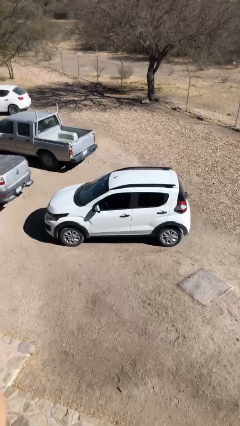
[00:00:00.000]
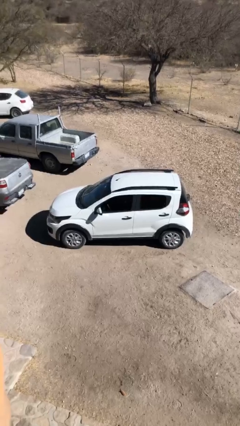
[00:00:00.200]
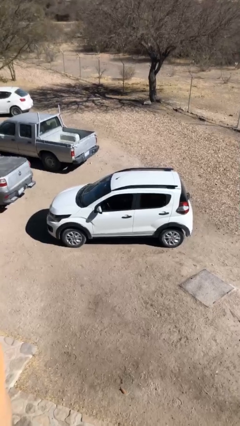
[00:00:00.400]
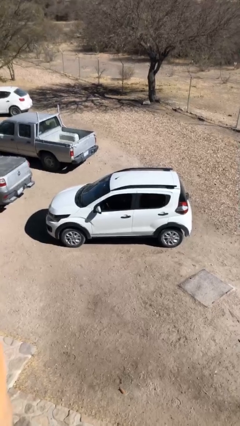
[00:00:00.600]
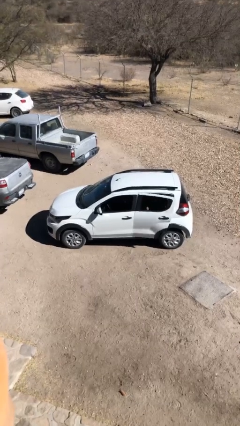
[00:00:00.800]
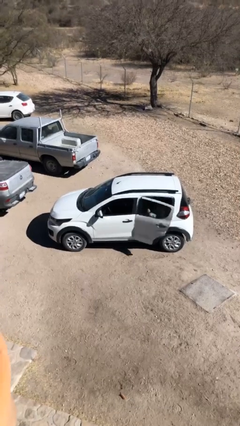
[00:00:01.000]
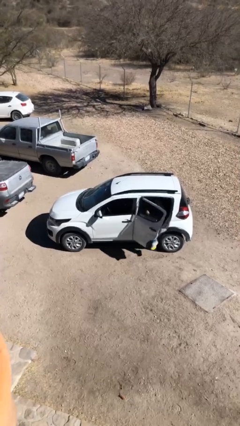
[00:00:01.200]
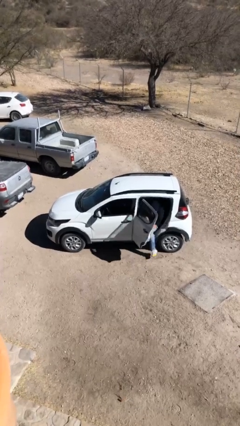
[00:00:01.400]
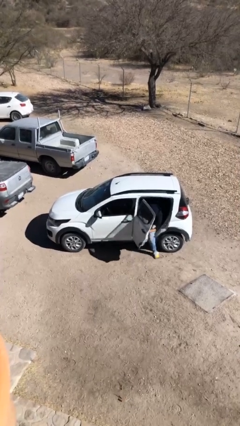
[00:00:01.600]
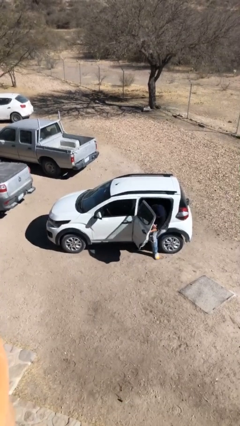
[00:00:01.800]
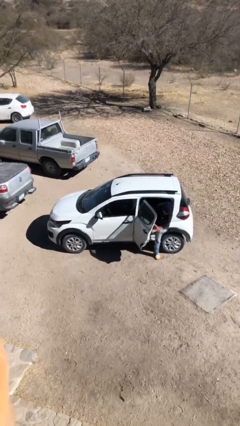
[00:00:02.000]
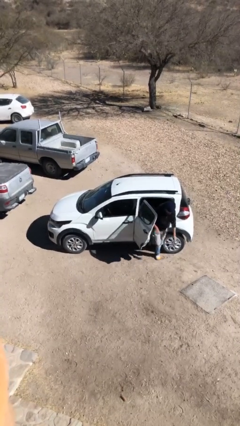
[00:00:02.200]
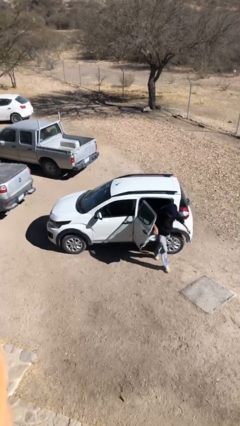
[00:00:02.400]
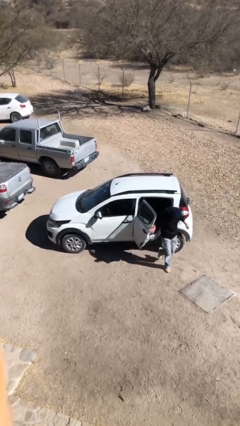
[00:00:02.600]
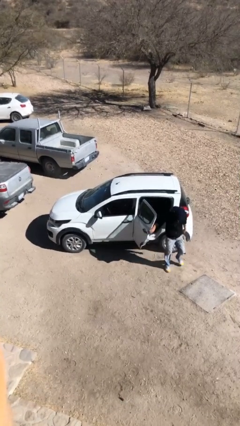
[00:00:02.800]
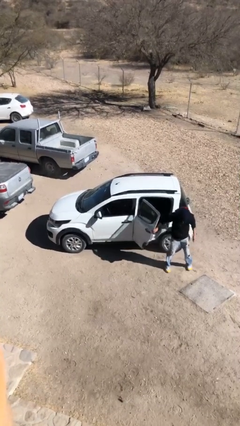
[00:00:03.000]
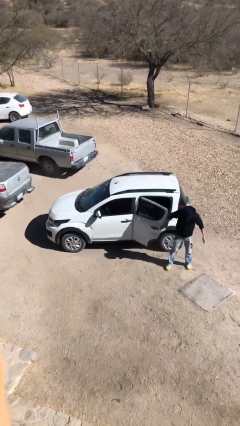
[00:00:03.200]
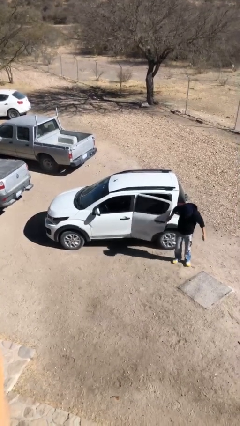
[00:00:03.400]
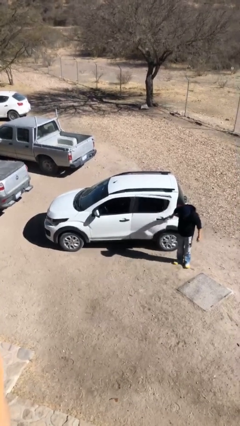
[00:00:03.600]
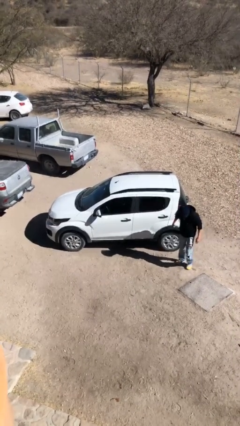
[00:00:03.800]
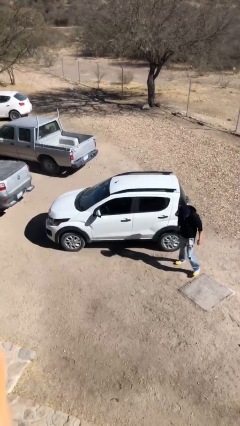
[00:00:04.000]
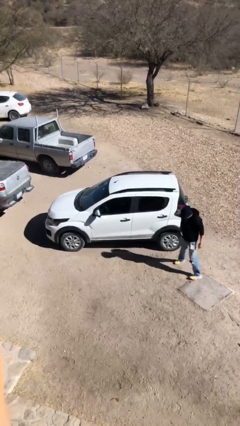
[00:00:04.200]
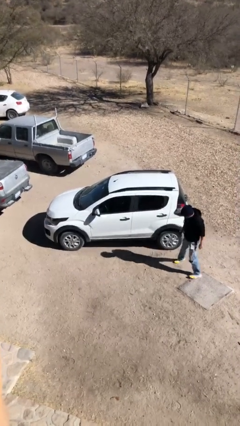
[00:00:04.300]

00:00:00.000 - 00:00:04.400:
car drops off person

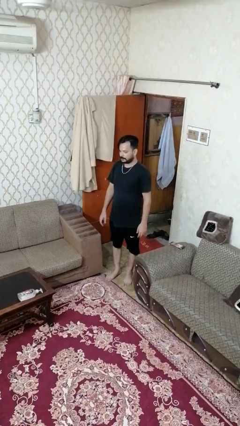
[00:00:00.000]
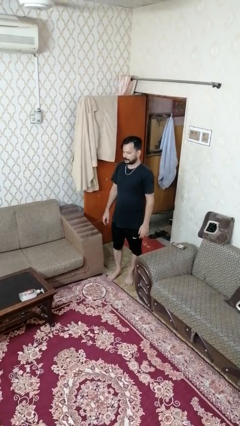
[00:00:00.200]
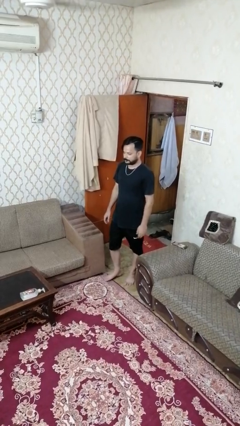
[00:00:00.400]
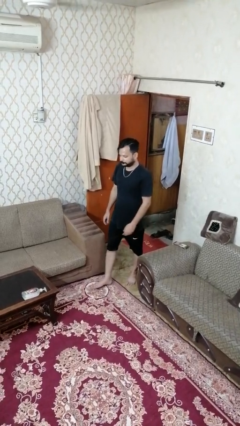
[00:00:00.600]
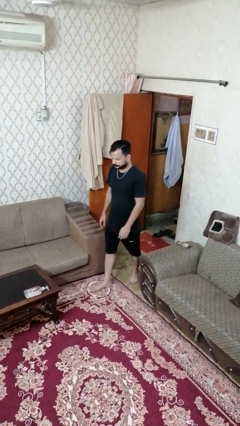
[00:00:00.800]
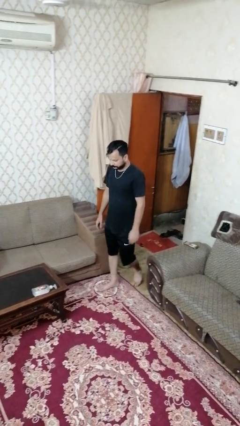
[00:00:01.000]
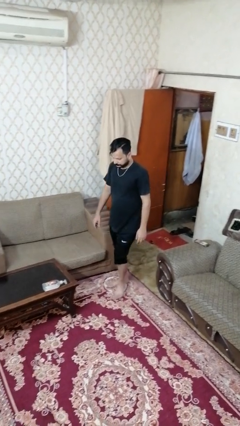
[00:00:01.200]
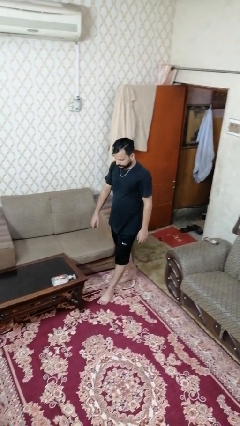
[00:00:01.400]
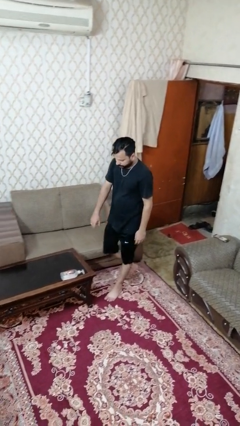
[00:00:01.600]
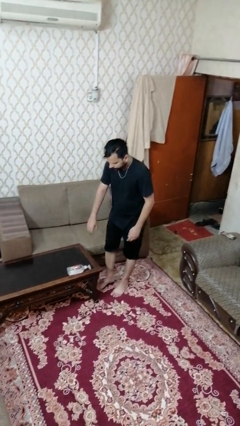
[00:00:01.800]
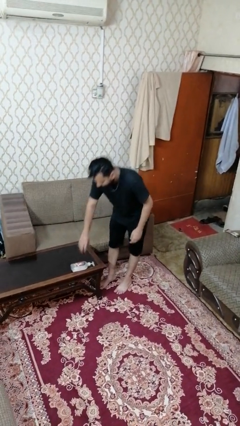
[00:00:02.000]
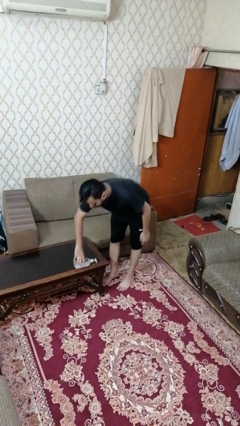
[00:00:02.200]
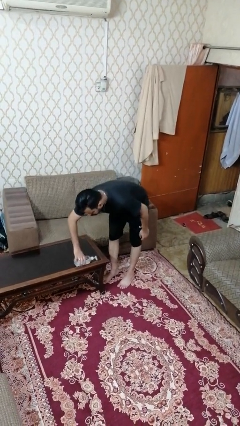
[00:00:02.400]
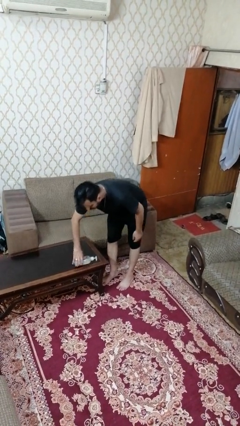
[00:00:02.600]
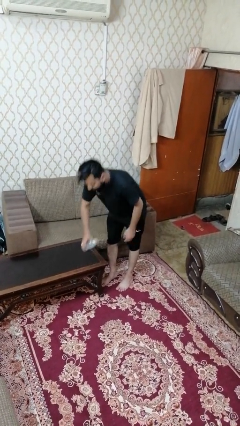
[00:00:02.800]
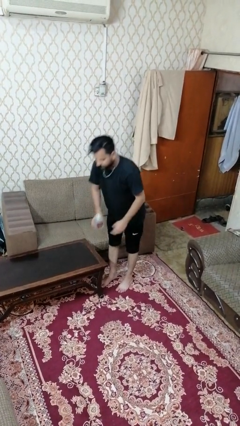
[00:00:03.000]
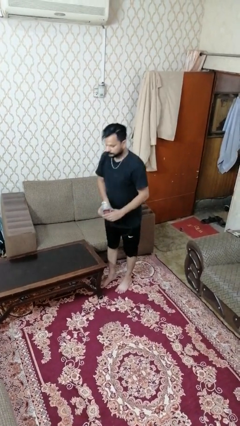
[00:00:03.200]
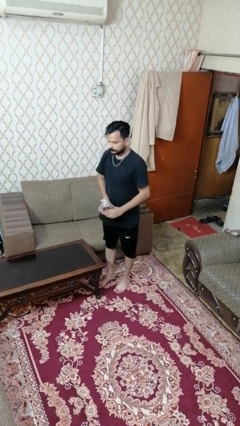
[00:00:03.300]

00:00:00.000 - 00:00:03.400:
person picks up object from table

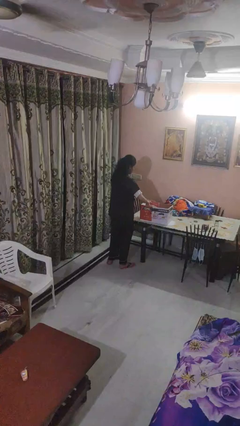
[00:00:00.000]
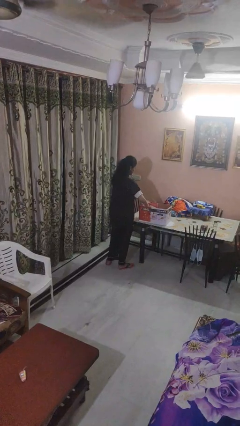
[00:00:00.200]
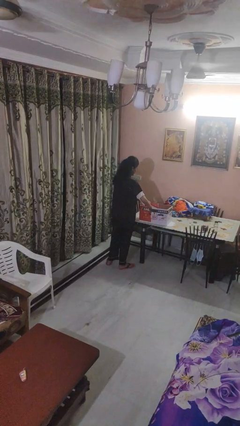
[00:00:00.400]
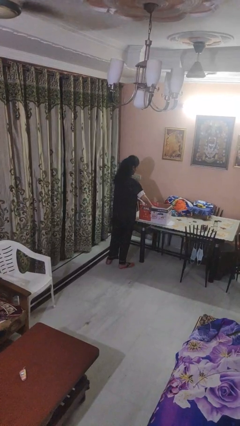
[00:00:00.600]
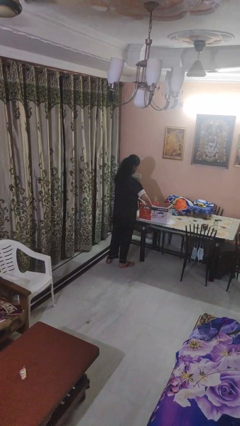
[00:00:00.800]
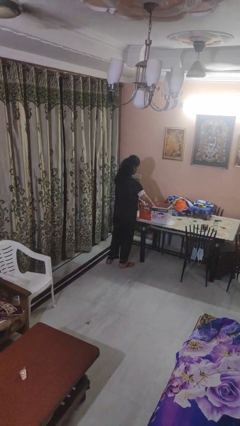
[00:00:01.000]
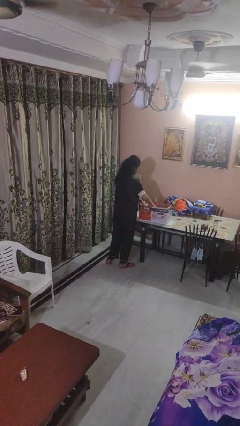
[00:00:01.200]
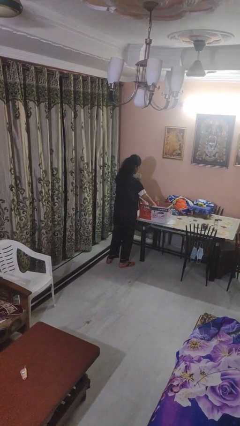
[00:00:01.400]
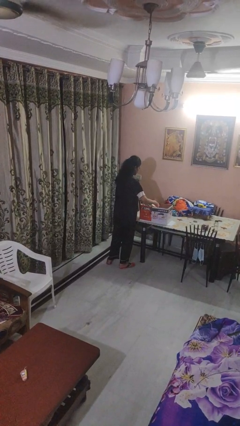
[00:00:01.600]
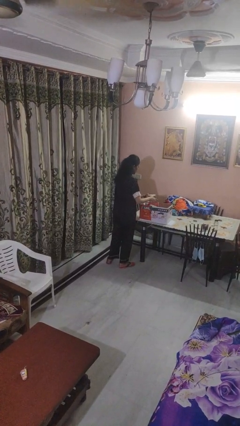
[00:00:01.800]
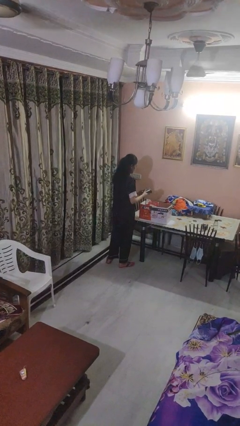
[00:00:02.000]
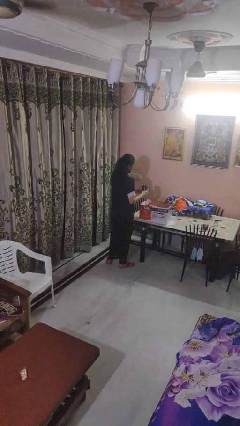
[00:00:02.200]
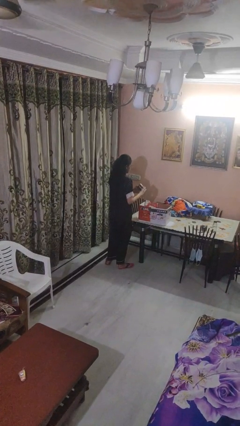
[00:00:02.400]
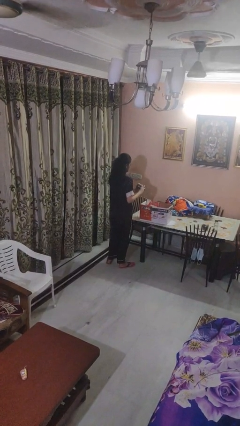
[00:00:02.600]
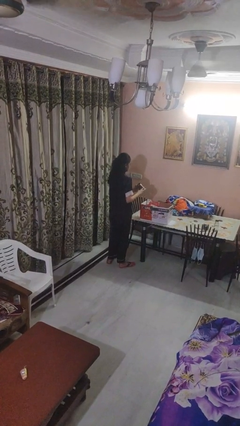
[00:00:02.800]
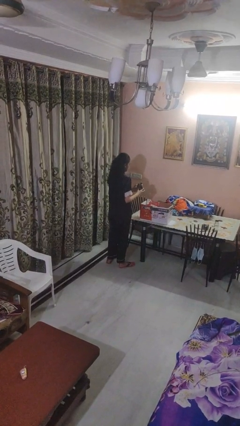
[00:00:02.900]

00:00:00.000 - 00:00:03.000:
person takes object from box

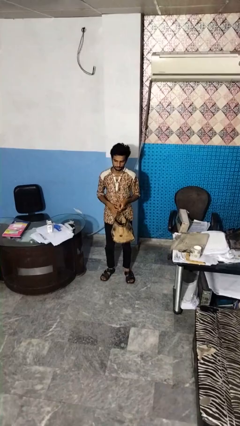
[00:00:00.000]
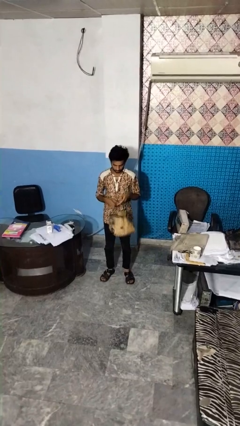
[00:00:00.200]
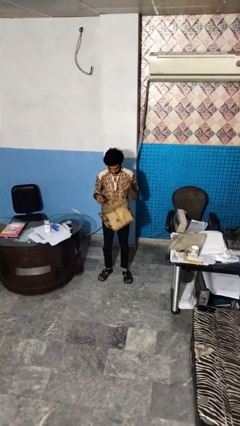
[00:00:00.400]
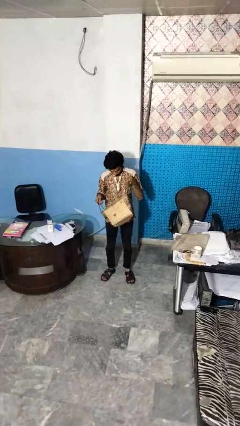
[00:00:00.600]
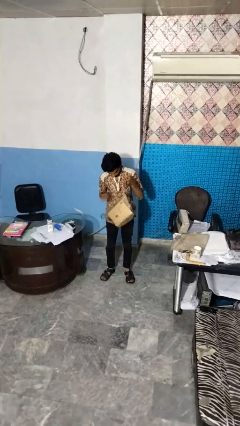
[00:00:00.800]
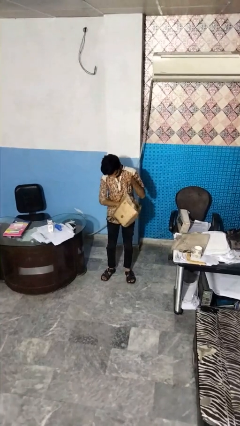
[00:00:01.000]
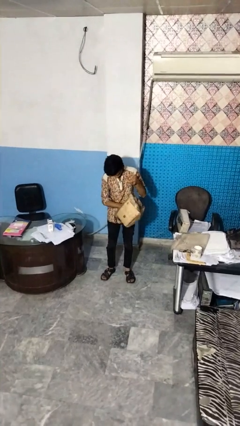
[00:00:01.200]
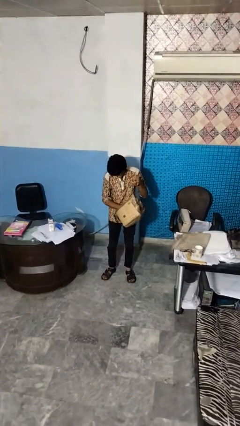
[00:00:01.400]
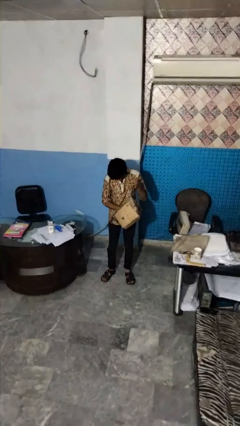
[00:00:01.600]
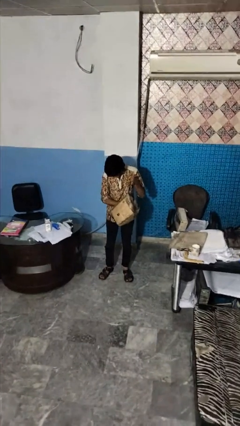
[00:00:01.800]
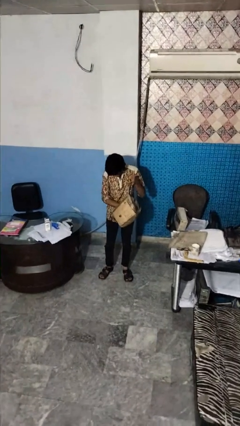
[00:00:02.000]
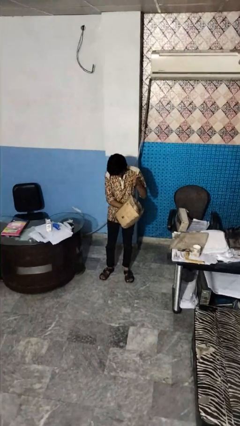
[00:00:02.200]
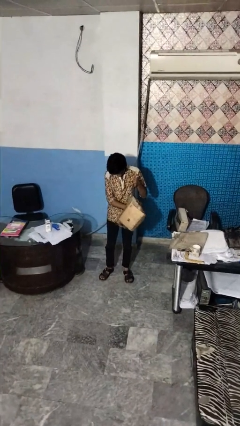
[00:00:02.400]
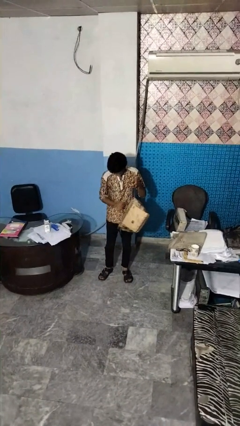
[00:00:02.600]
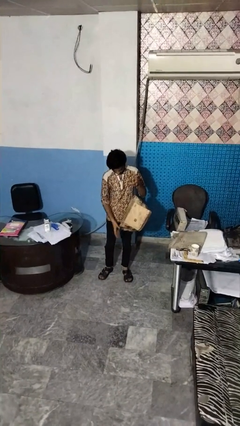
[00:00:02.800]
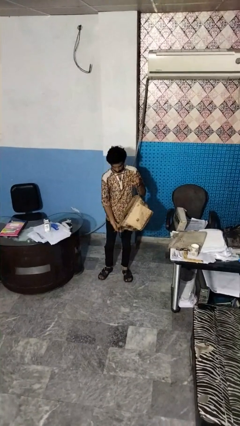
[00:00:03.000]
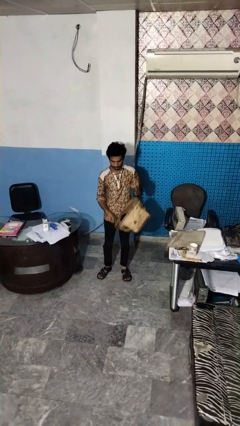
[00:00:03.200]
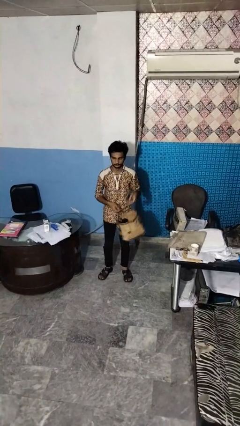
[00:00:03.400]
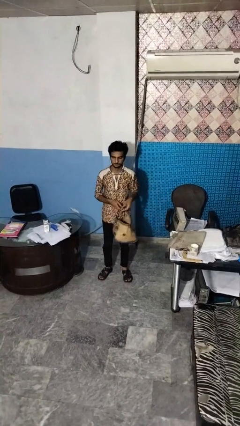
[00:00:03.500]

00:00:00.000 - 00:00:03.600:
person searches in bag

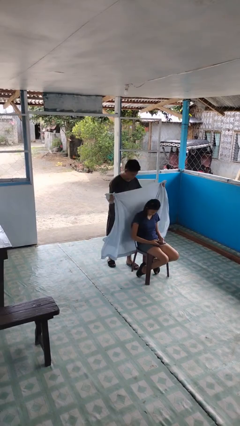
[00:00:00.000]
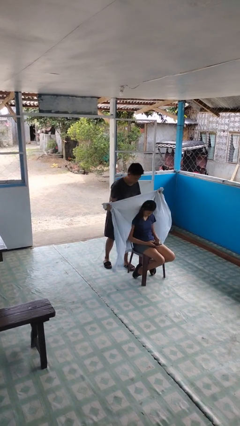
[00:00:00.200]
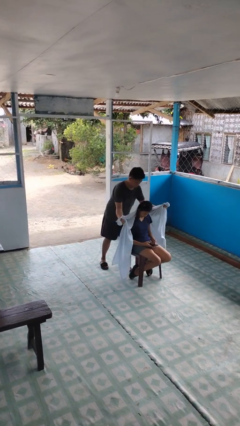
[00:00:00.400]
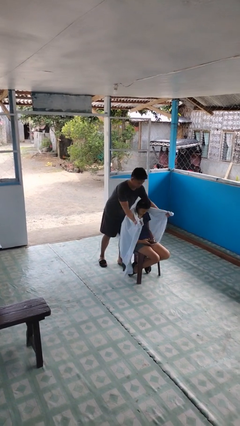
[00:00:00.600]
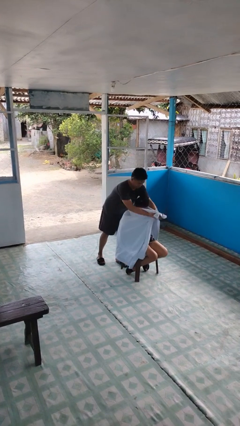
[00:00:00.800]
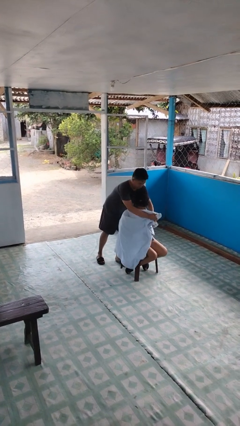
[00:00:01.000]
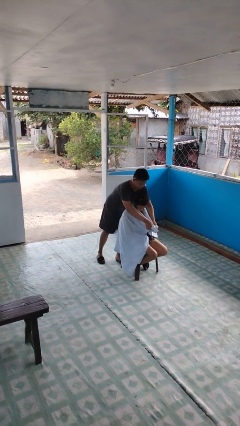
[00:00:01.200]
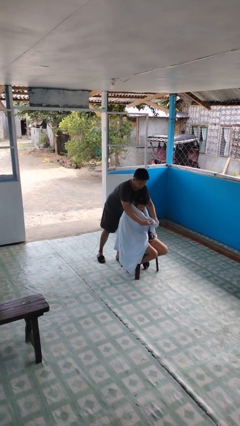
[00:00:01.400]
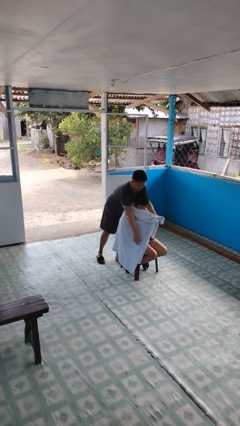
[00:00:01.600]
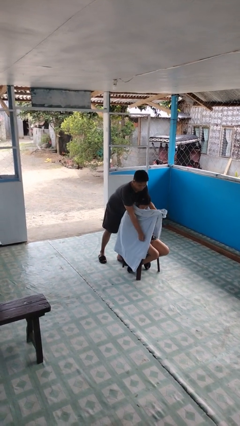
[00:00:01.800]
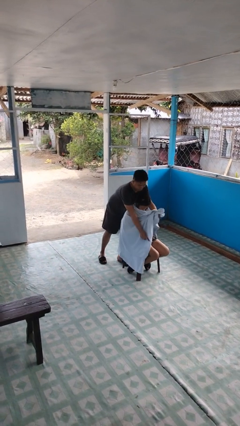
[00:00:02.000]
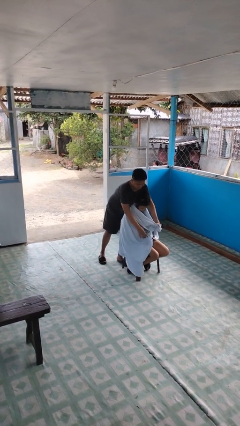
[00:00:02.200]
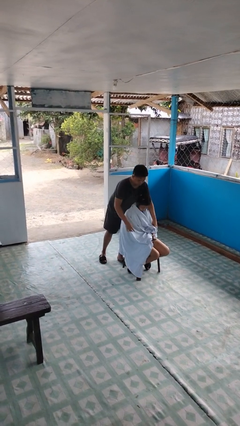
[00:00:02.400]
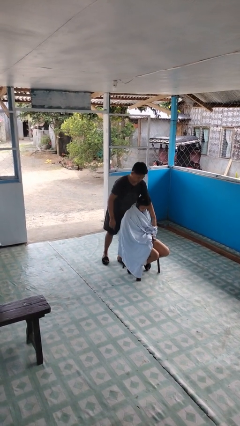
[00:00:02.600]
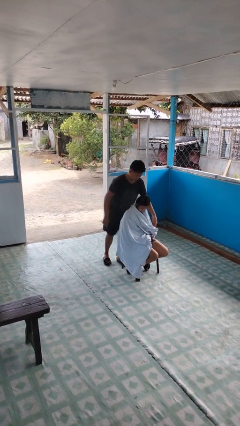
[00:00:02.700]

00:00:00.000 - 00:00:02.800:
person covers friend with blanket

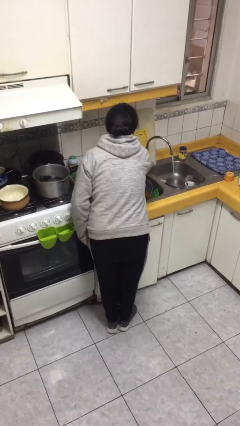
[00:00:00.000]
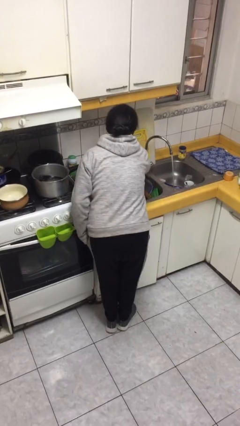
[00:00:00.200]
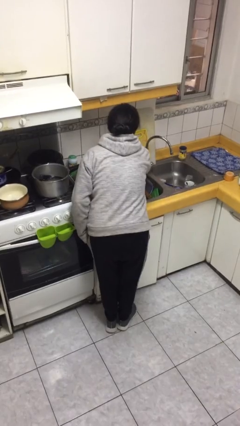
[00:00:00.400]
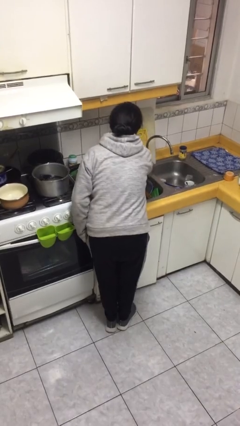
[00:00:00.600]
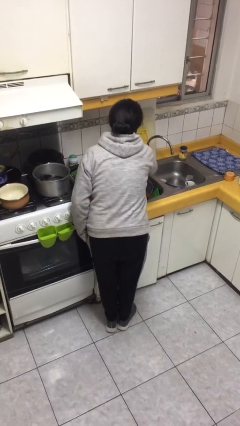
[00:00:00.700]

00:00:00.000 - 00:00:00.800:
person turns off faucet
